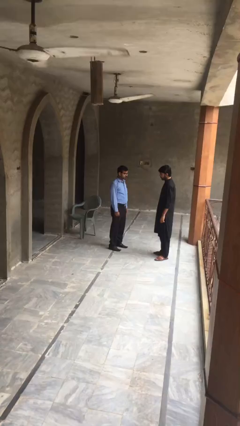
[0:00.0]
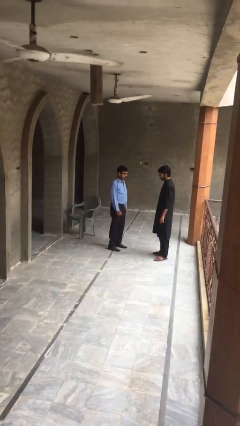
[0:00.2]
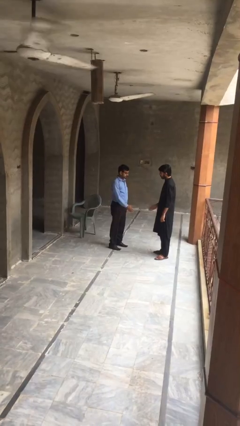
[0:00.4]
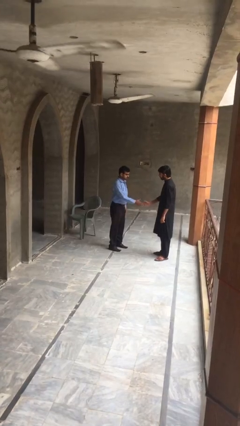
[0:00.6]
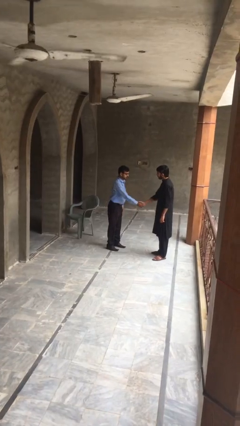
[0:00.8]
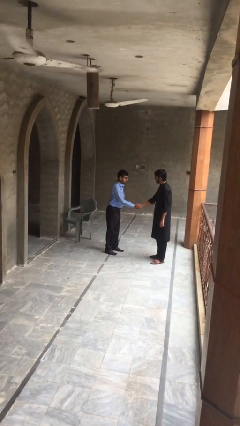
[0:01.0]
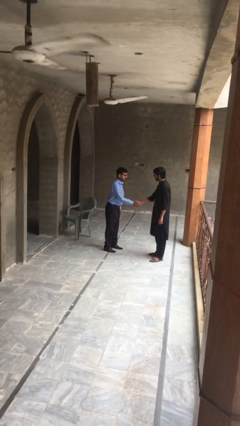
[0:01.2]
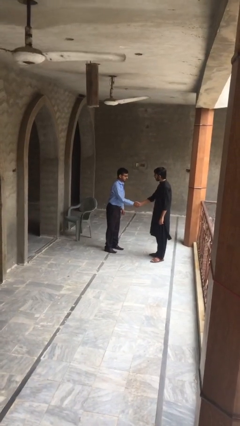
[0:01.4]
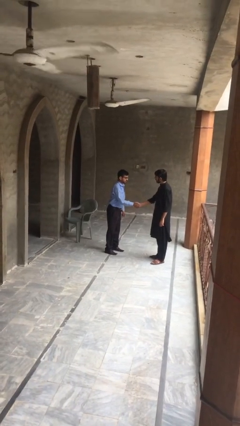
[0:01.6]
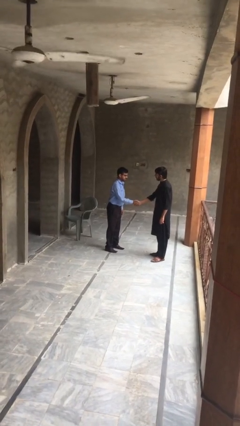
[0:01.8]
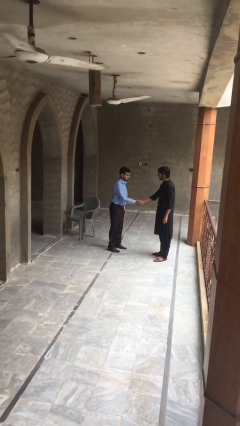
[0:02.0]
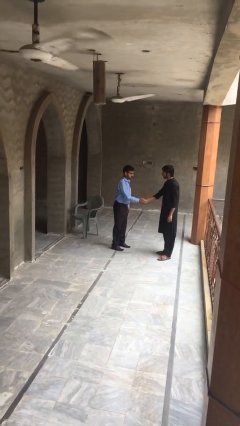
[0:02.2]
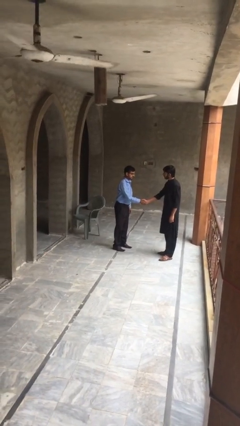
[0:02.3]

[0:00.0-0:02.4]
person shakes hand

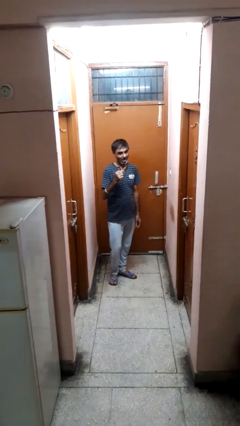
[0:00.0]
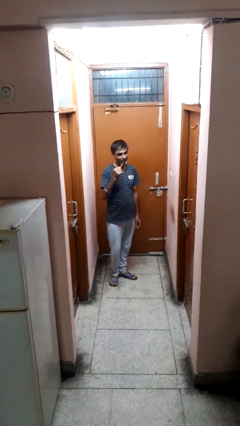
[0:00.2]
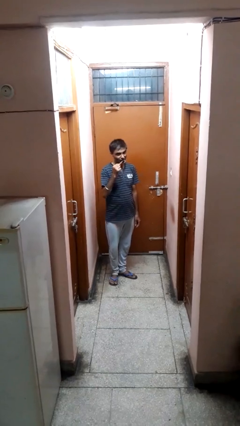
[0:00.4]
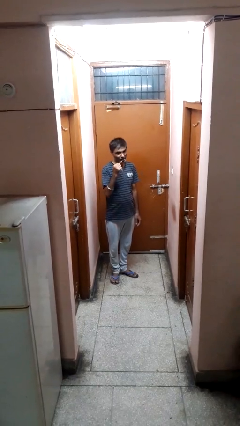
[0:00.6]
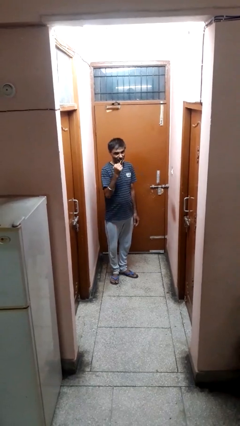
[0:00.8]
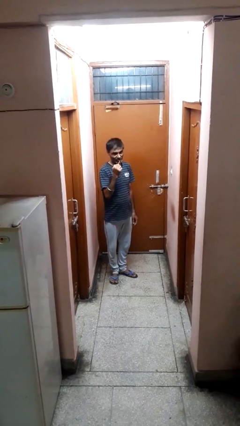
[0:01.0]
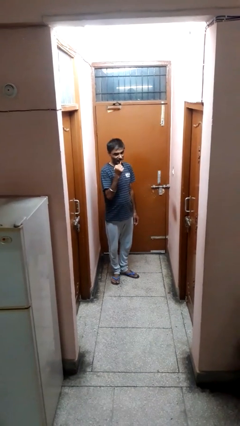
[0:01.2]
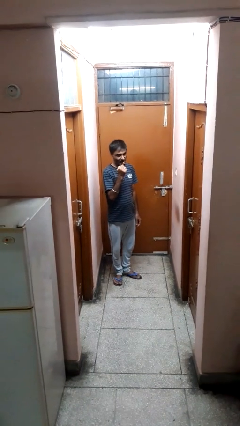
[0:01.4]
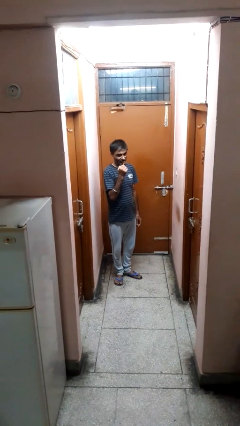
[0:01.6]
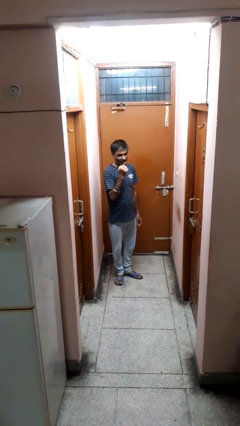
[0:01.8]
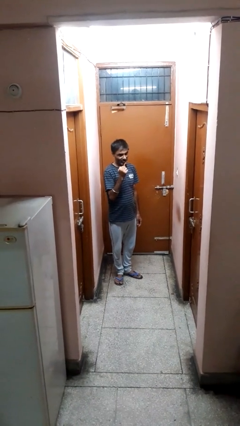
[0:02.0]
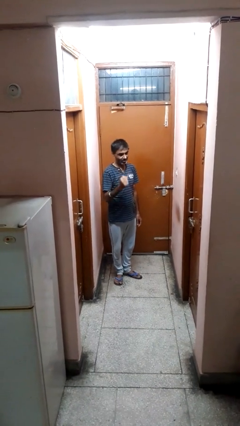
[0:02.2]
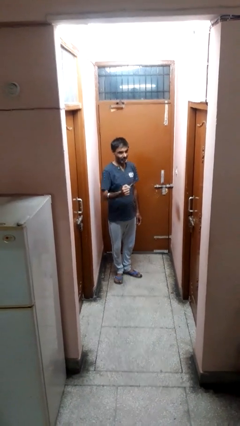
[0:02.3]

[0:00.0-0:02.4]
person brushes teeth

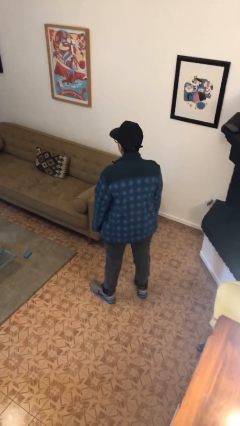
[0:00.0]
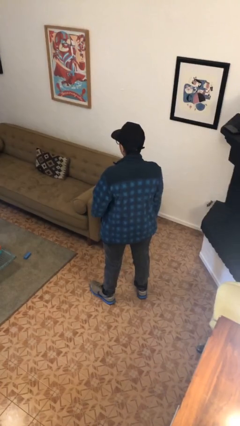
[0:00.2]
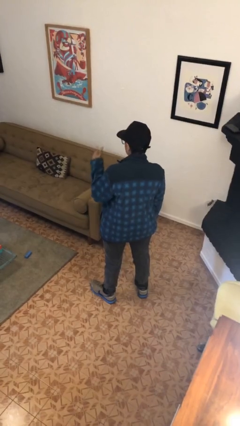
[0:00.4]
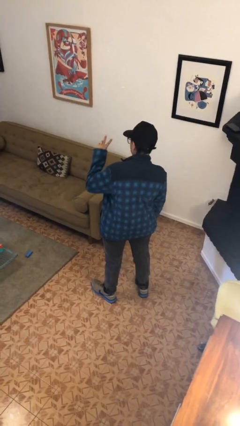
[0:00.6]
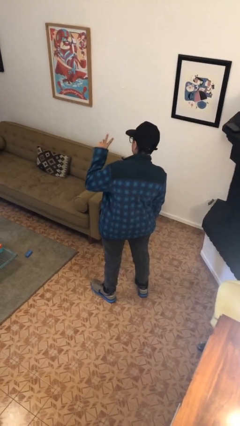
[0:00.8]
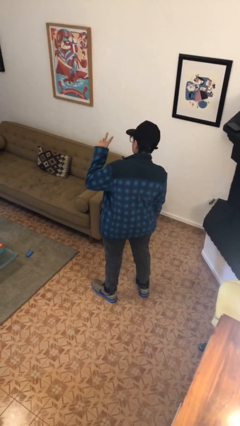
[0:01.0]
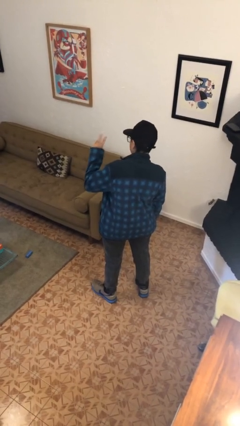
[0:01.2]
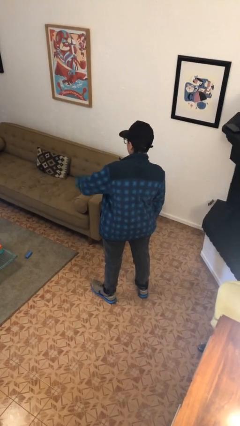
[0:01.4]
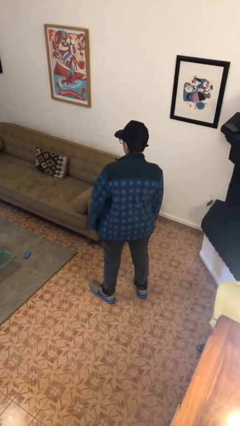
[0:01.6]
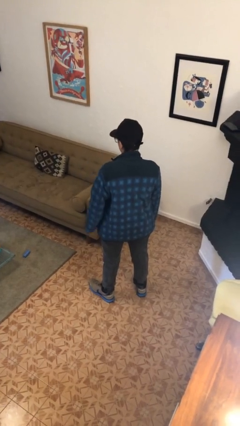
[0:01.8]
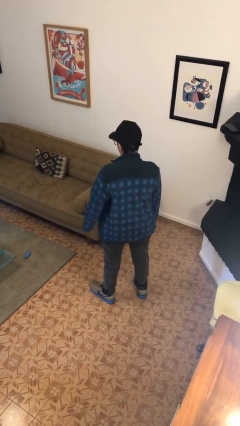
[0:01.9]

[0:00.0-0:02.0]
person gestures peace

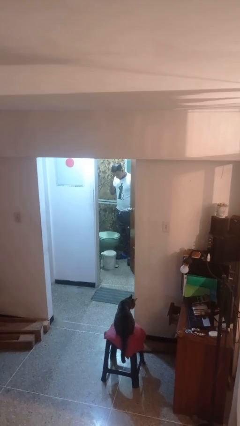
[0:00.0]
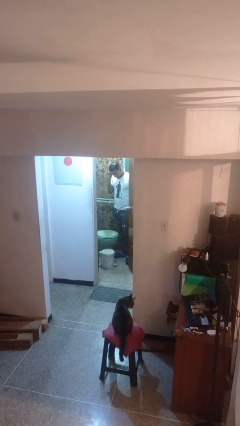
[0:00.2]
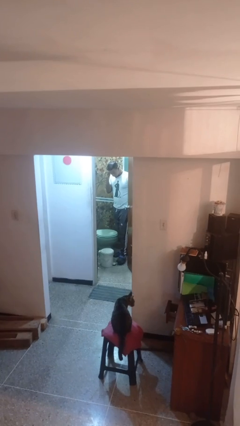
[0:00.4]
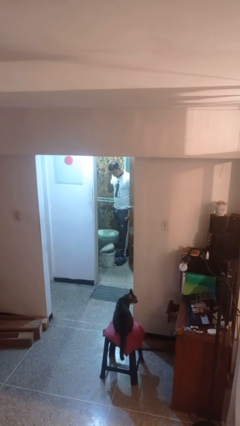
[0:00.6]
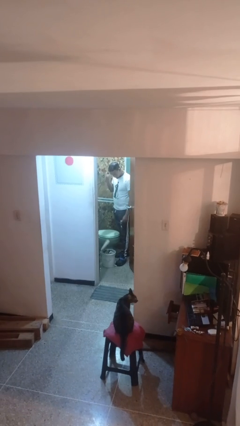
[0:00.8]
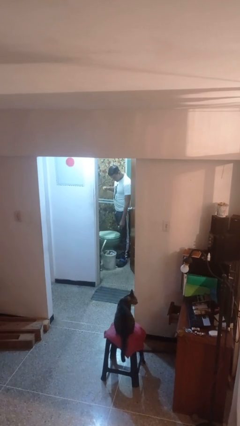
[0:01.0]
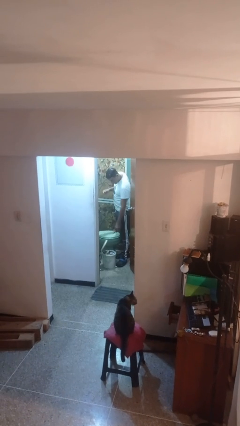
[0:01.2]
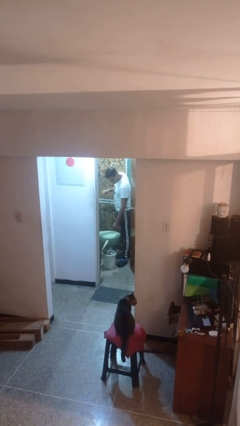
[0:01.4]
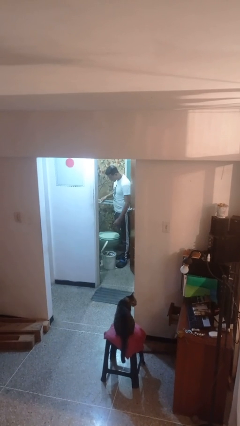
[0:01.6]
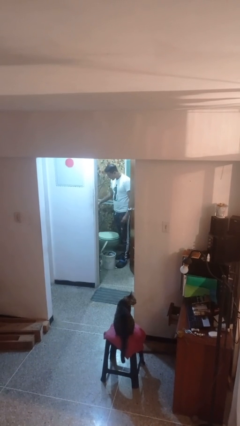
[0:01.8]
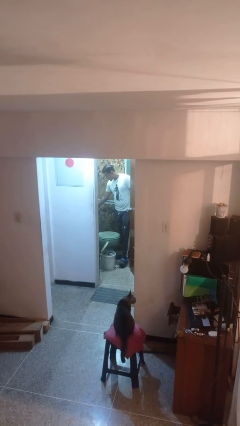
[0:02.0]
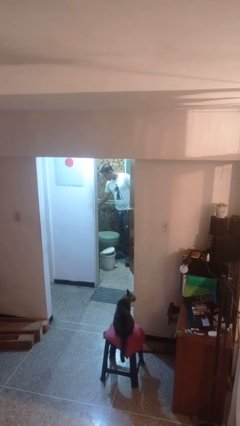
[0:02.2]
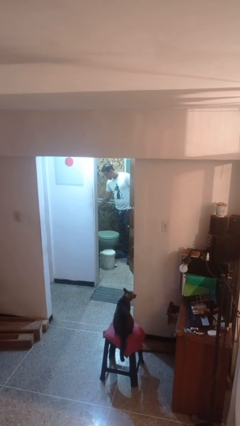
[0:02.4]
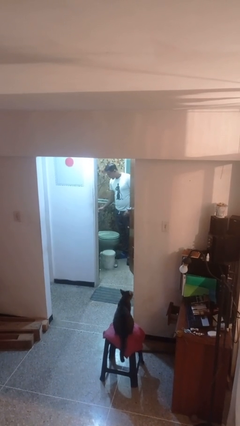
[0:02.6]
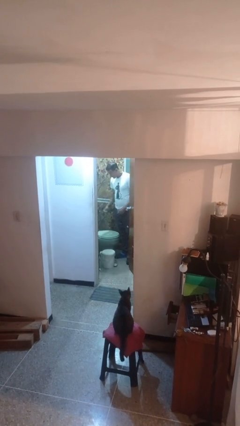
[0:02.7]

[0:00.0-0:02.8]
person discards trash

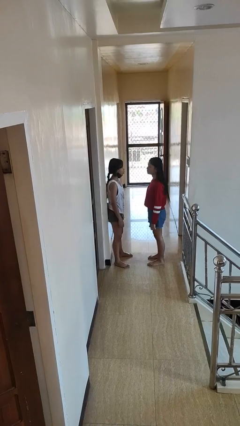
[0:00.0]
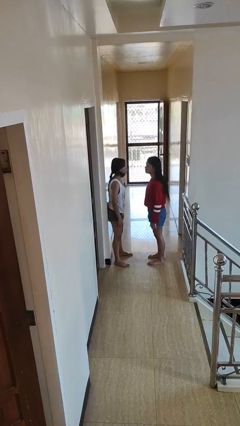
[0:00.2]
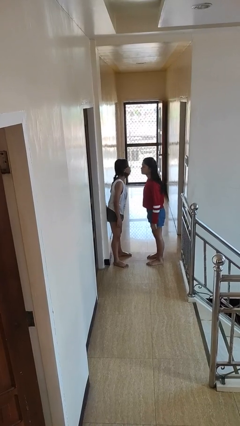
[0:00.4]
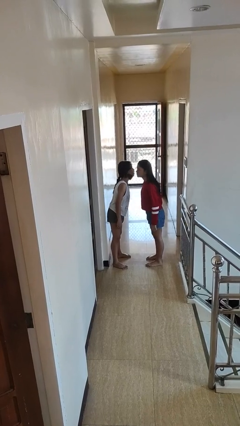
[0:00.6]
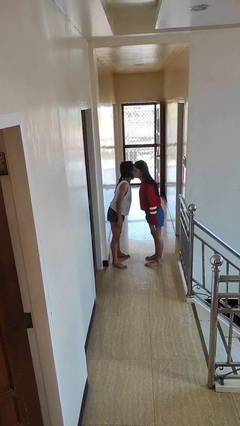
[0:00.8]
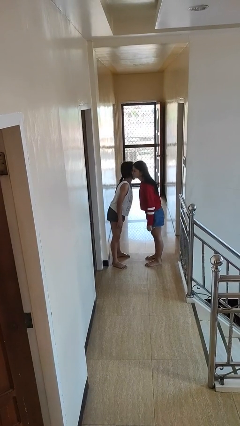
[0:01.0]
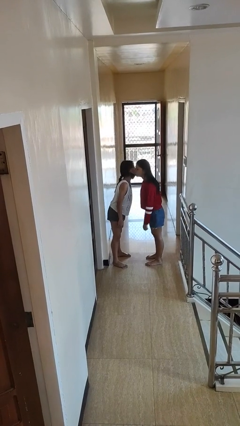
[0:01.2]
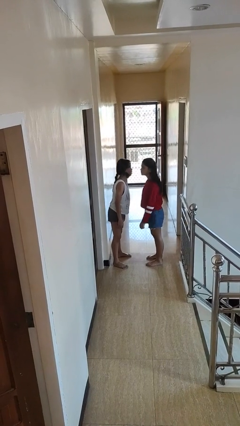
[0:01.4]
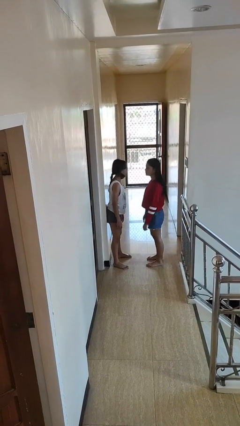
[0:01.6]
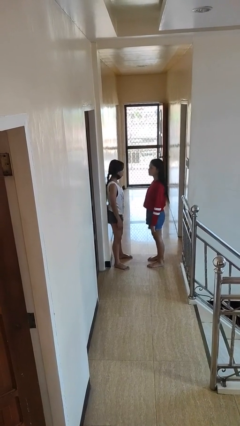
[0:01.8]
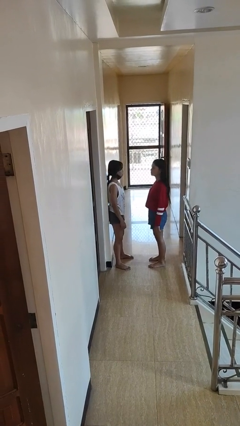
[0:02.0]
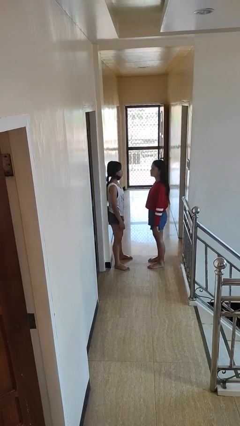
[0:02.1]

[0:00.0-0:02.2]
person kisses cheek of person

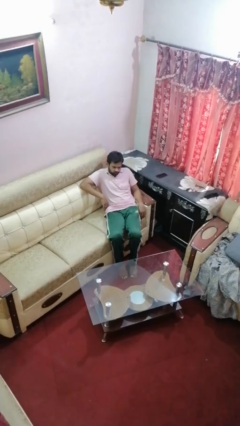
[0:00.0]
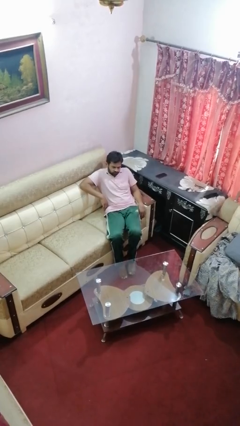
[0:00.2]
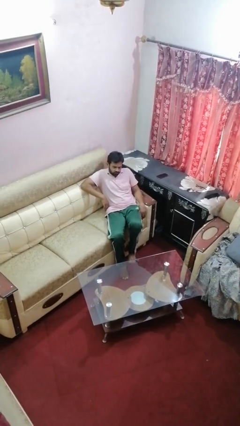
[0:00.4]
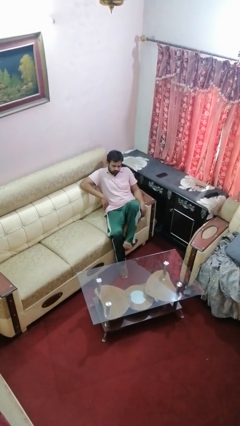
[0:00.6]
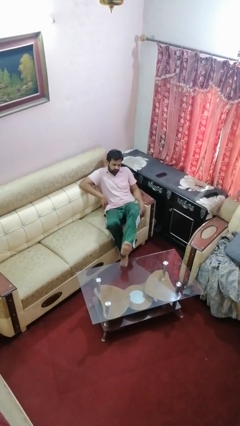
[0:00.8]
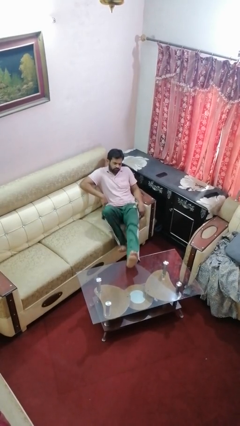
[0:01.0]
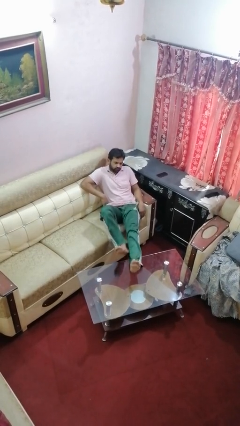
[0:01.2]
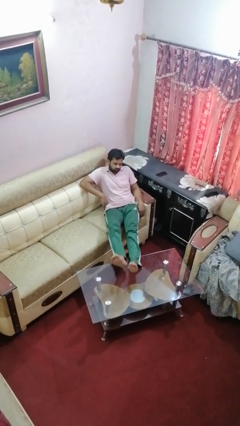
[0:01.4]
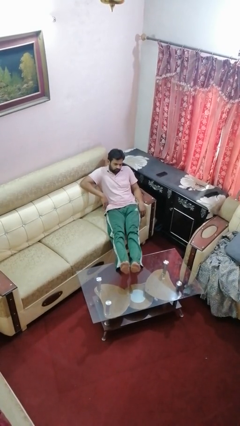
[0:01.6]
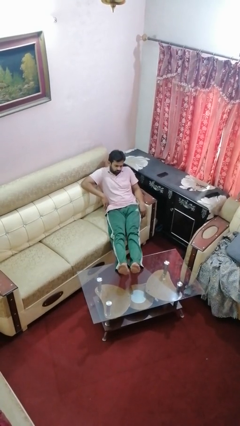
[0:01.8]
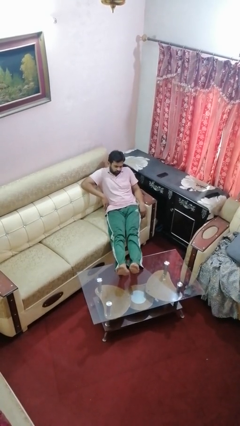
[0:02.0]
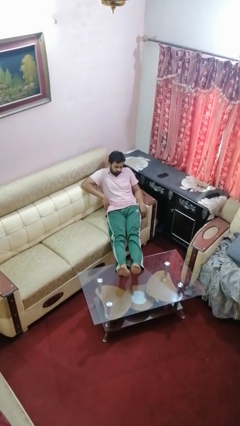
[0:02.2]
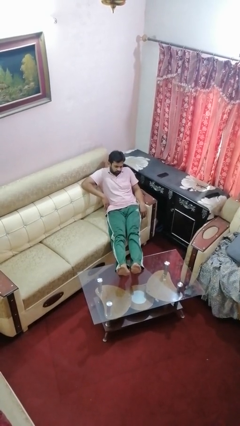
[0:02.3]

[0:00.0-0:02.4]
person puts feet up

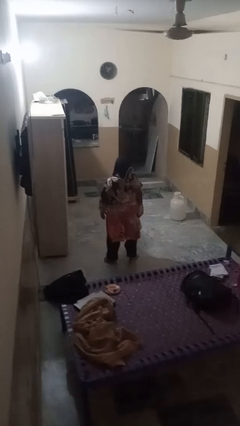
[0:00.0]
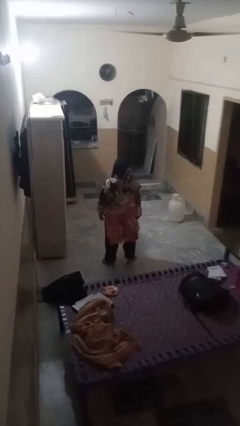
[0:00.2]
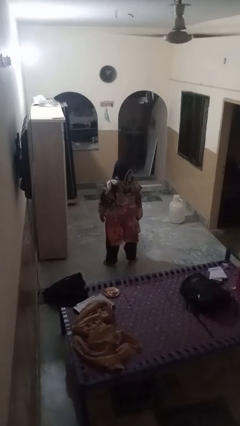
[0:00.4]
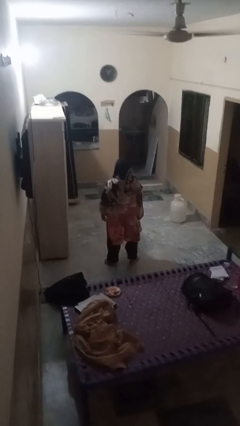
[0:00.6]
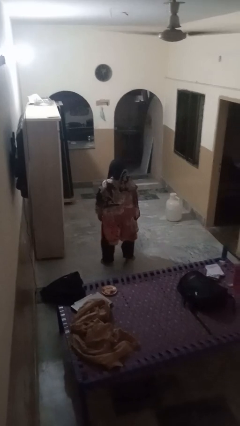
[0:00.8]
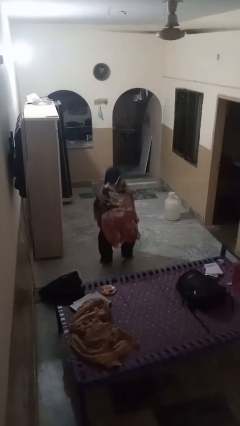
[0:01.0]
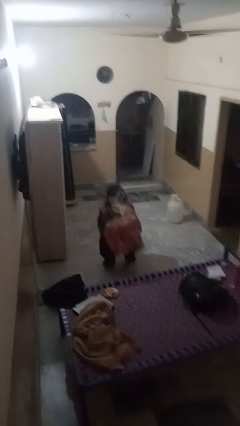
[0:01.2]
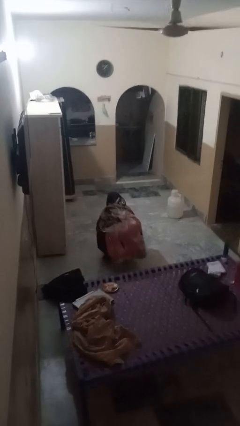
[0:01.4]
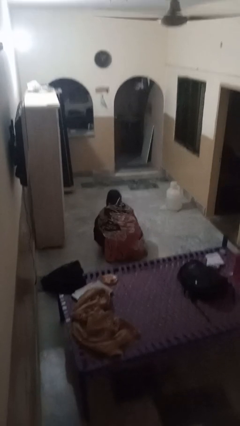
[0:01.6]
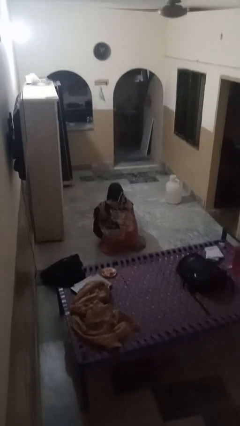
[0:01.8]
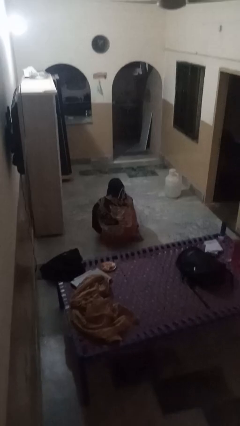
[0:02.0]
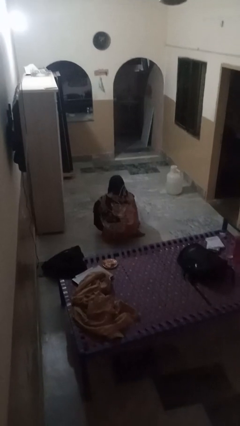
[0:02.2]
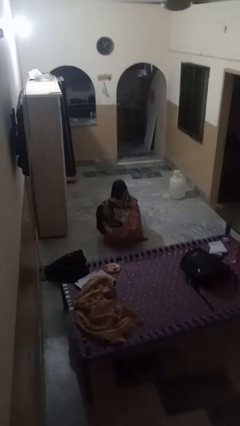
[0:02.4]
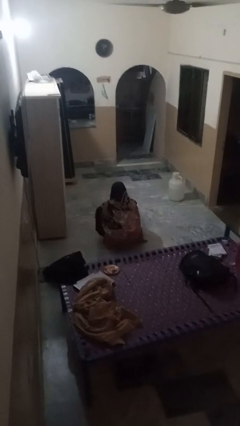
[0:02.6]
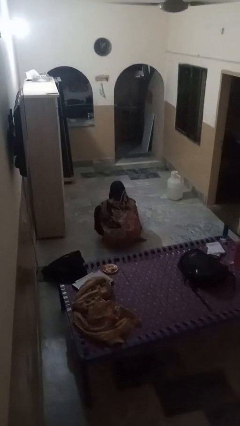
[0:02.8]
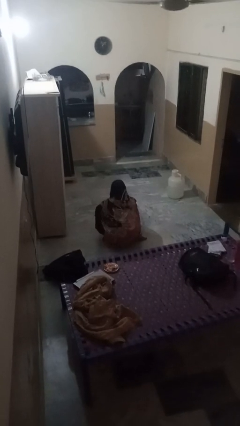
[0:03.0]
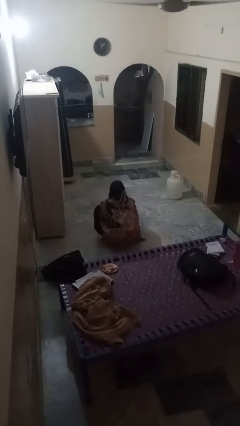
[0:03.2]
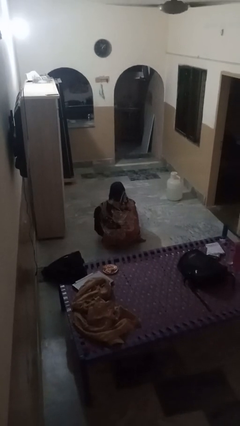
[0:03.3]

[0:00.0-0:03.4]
person squats
